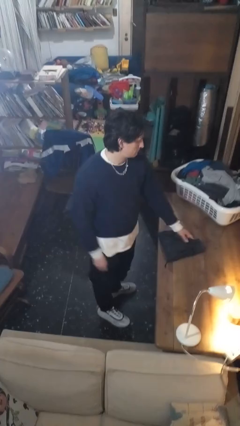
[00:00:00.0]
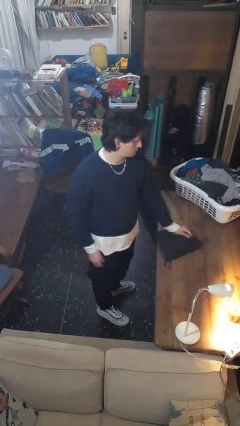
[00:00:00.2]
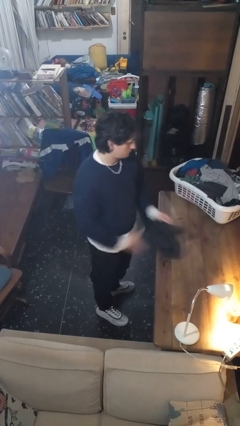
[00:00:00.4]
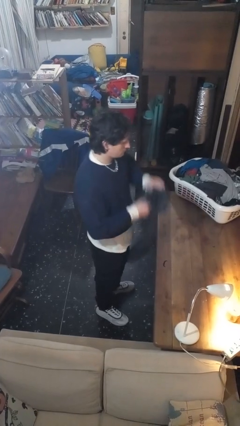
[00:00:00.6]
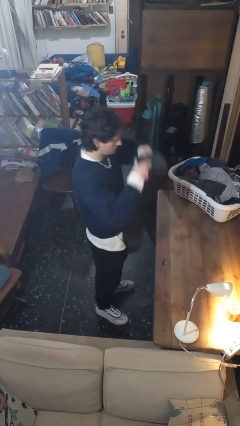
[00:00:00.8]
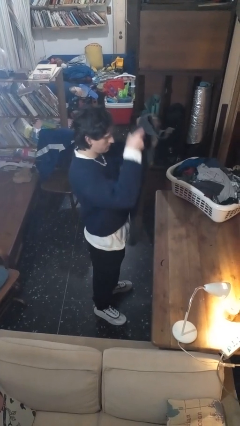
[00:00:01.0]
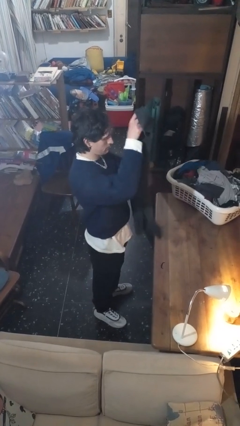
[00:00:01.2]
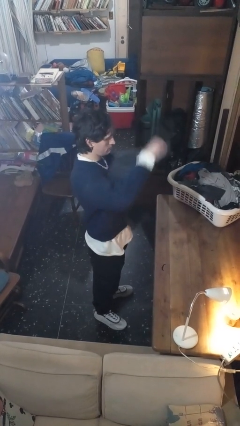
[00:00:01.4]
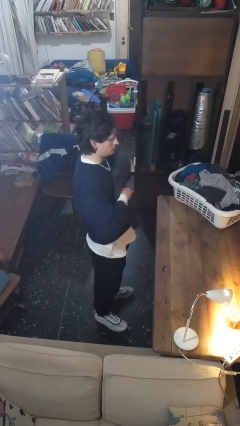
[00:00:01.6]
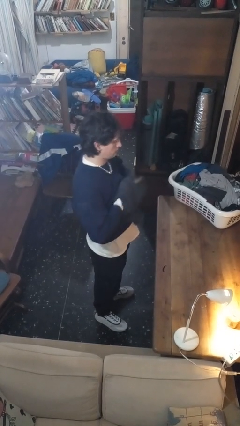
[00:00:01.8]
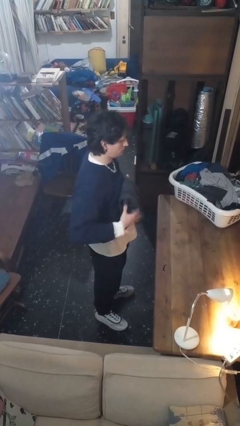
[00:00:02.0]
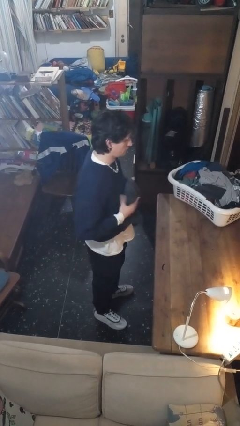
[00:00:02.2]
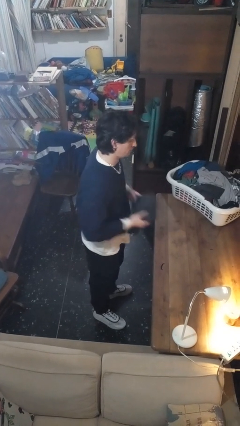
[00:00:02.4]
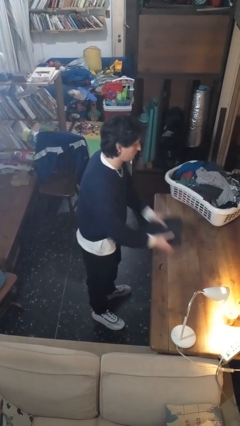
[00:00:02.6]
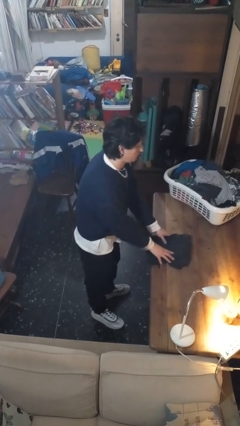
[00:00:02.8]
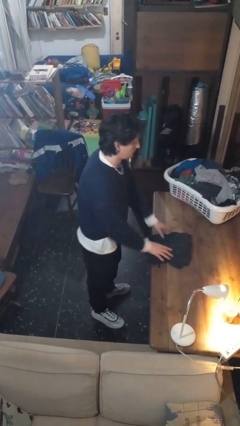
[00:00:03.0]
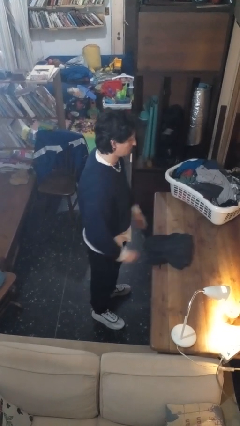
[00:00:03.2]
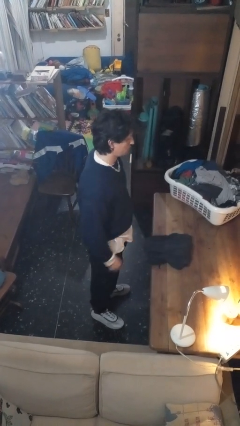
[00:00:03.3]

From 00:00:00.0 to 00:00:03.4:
person folds pants

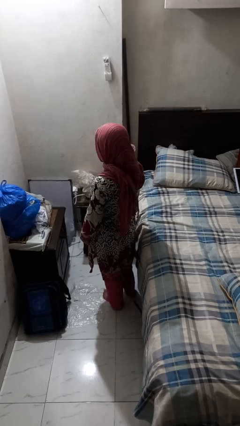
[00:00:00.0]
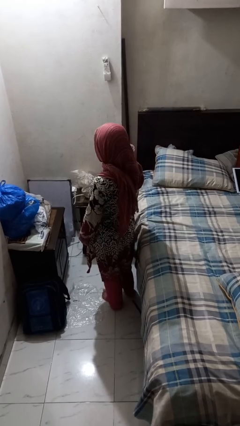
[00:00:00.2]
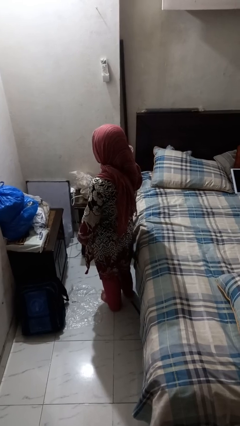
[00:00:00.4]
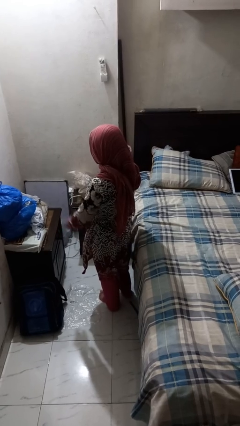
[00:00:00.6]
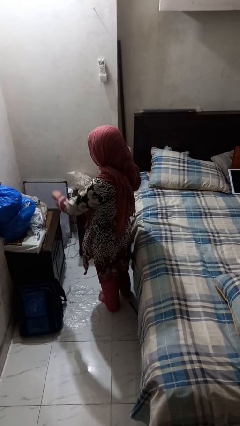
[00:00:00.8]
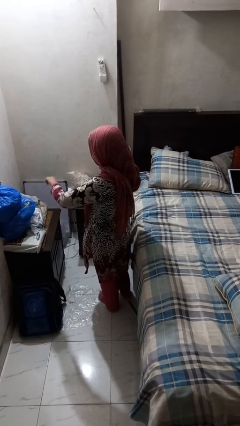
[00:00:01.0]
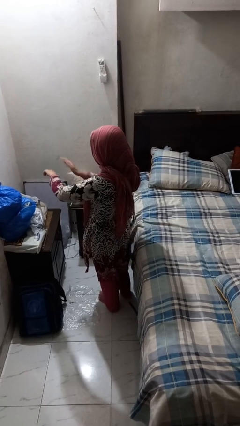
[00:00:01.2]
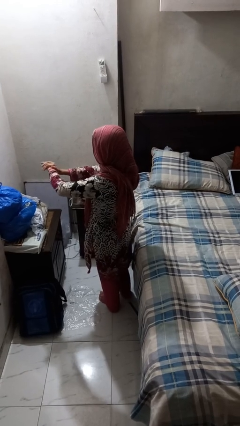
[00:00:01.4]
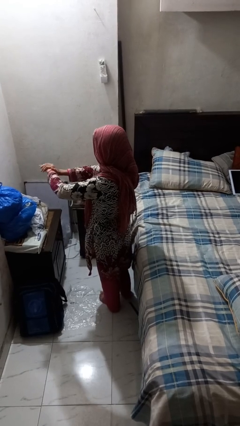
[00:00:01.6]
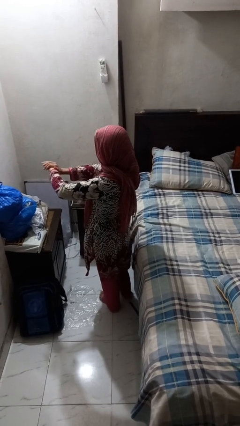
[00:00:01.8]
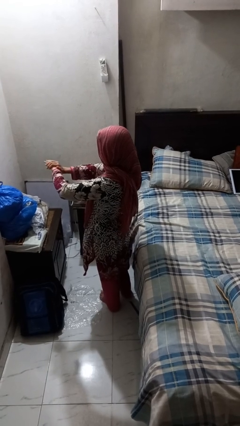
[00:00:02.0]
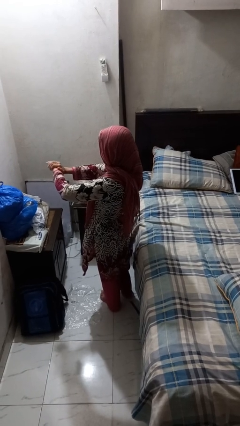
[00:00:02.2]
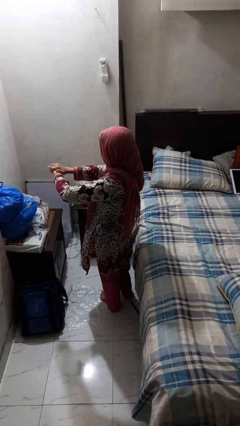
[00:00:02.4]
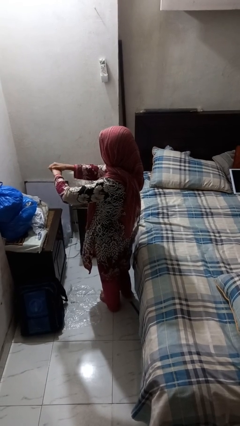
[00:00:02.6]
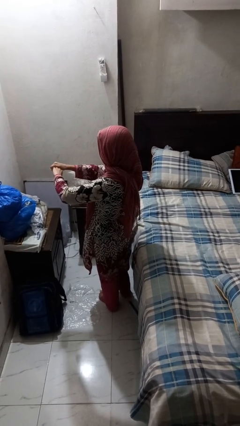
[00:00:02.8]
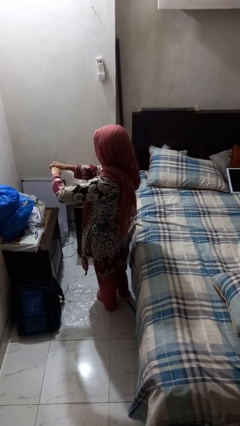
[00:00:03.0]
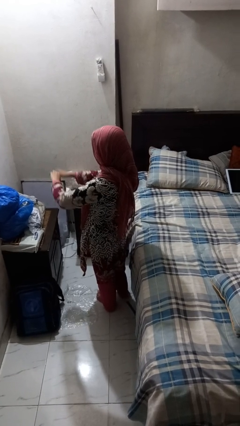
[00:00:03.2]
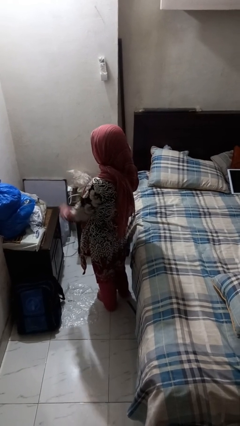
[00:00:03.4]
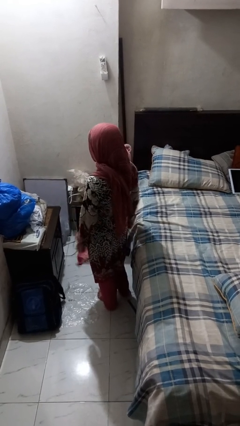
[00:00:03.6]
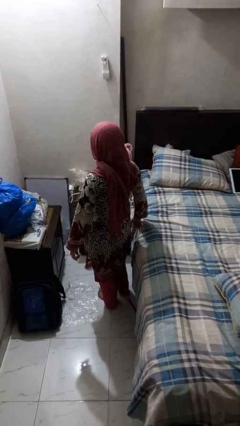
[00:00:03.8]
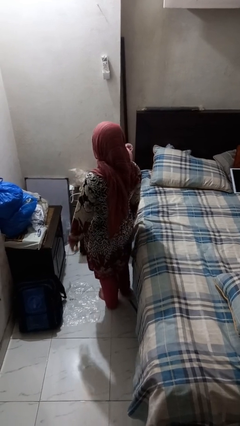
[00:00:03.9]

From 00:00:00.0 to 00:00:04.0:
person swats bug

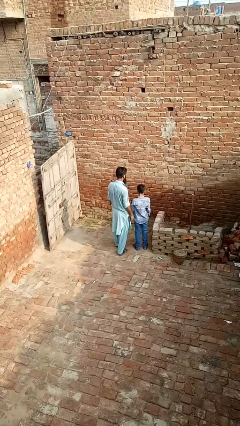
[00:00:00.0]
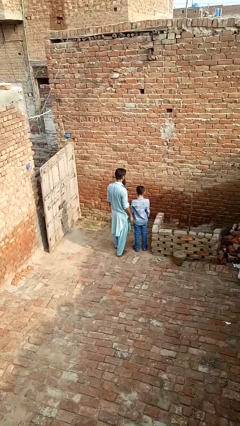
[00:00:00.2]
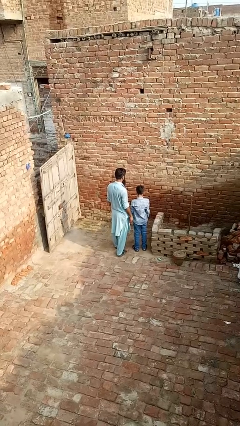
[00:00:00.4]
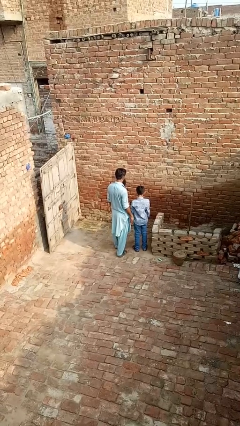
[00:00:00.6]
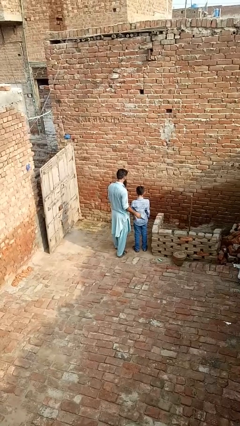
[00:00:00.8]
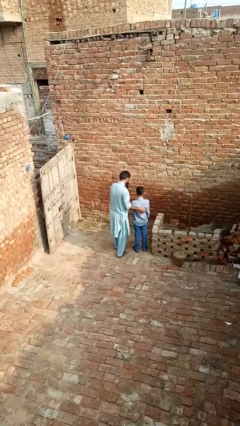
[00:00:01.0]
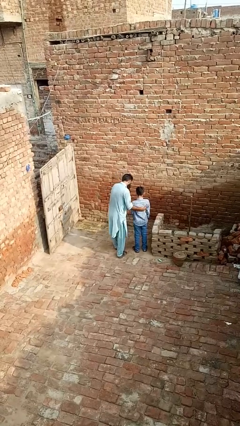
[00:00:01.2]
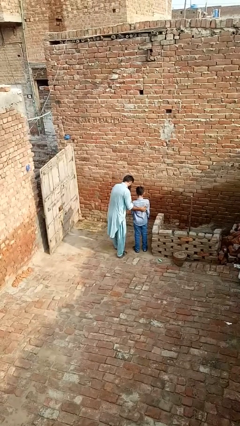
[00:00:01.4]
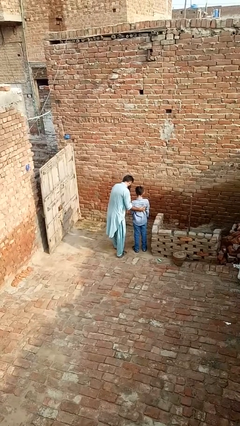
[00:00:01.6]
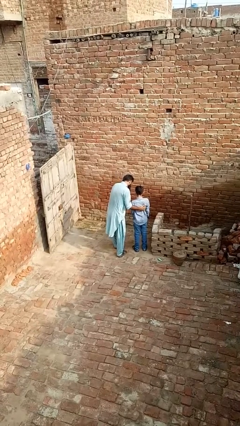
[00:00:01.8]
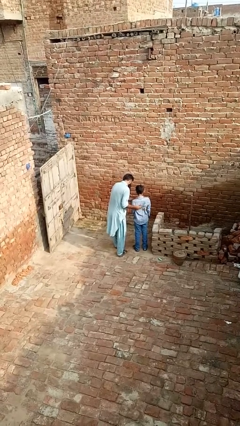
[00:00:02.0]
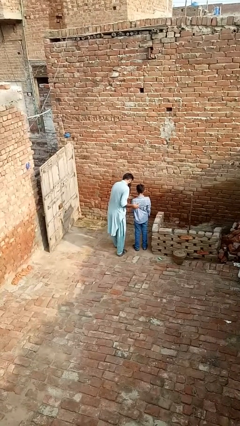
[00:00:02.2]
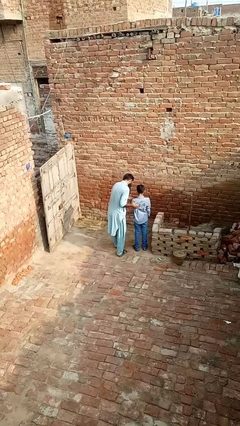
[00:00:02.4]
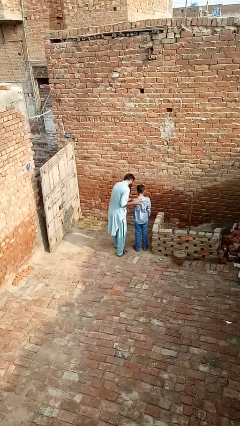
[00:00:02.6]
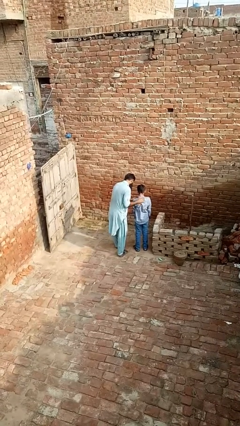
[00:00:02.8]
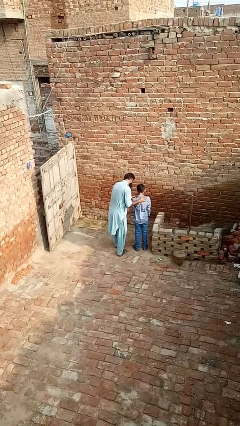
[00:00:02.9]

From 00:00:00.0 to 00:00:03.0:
person tickles person

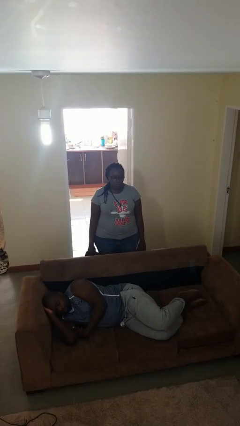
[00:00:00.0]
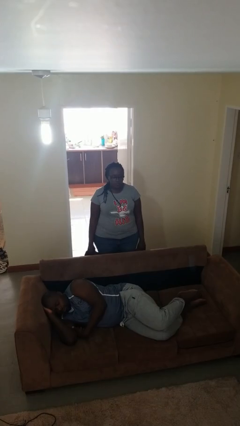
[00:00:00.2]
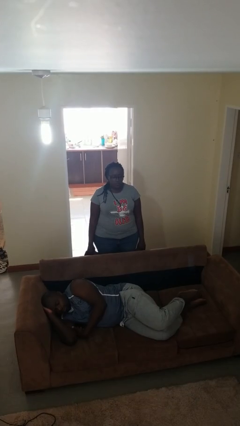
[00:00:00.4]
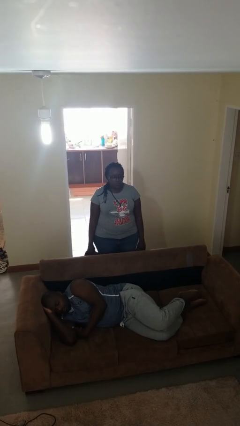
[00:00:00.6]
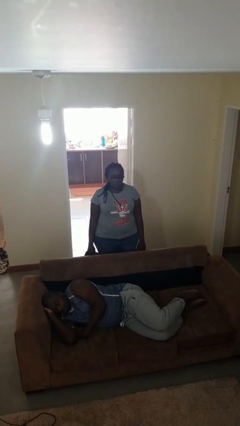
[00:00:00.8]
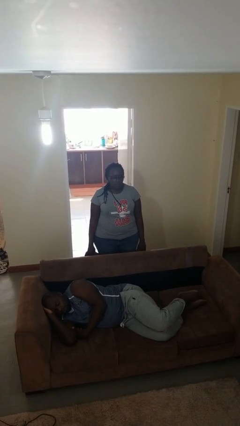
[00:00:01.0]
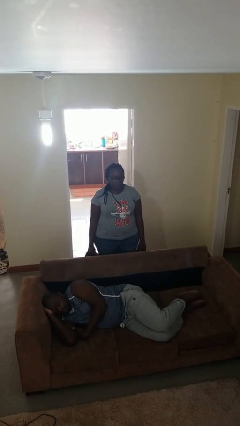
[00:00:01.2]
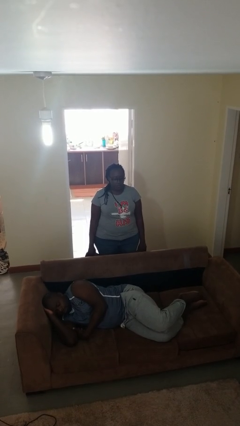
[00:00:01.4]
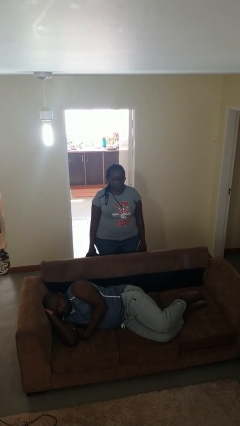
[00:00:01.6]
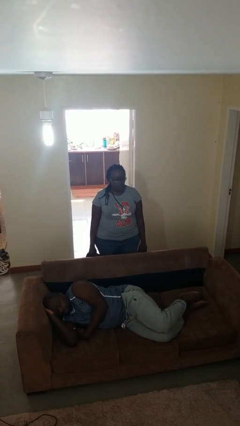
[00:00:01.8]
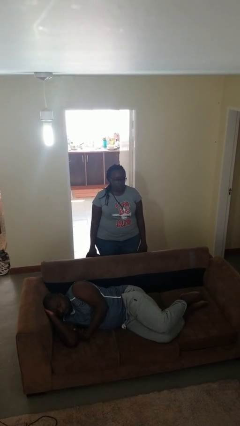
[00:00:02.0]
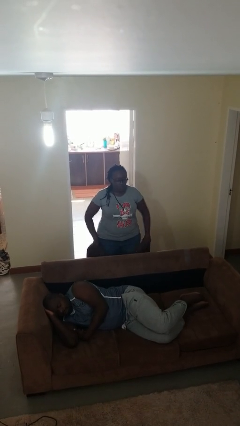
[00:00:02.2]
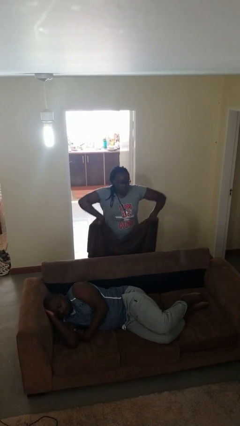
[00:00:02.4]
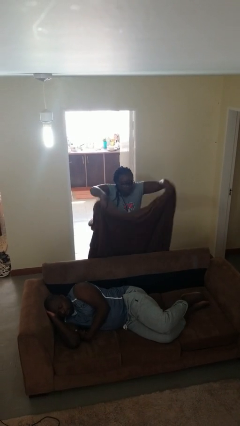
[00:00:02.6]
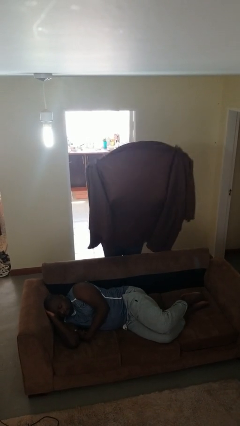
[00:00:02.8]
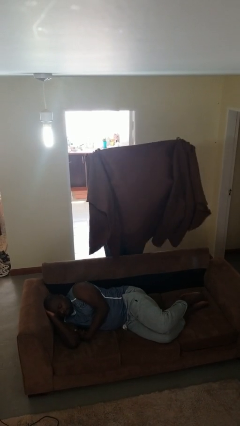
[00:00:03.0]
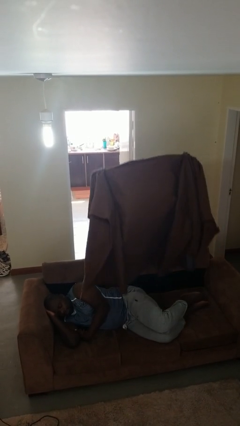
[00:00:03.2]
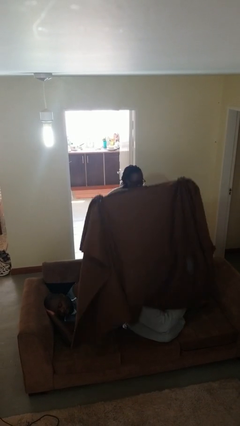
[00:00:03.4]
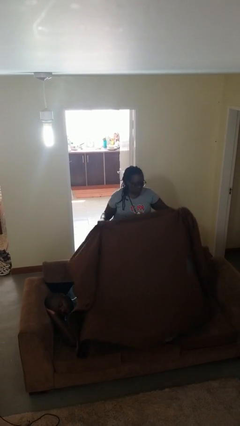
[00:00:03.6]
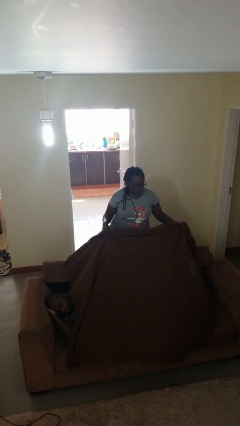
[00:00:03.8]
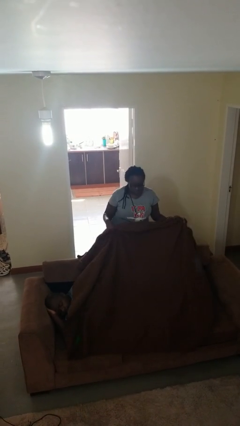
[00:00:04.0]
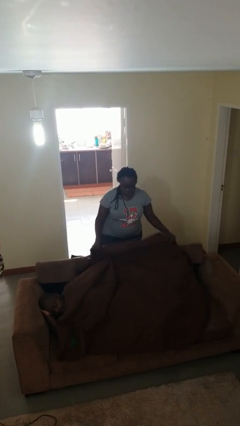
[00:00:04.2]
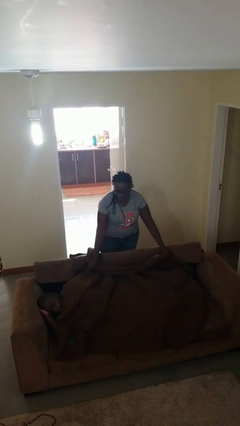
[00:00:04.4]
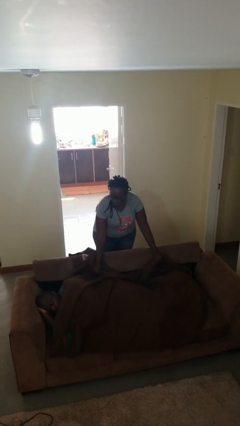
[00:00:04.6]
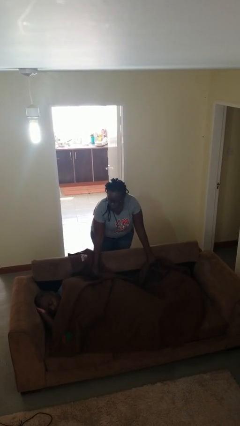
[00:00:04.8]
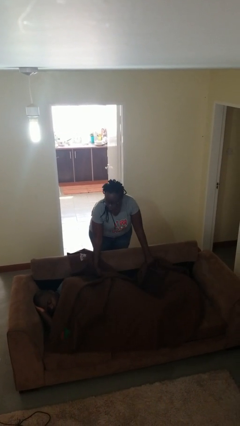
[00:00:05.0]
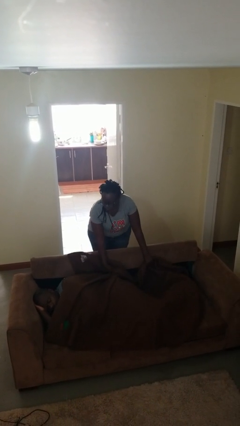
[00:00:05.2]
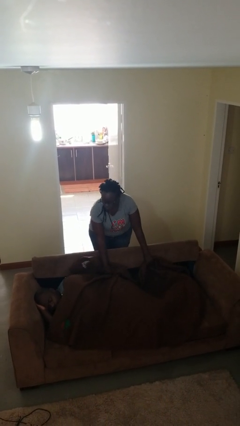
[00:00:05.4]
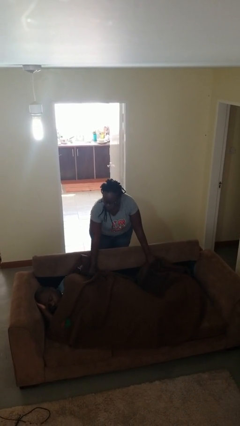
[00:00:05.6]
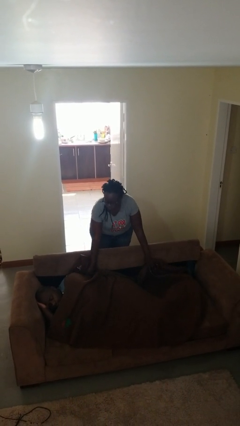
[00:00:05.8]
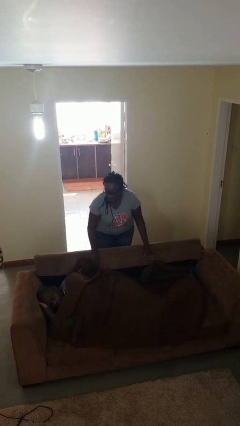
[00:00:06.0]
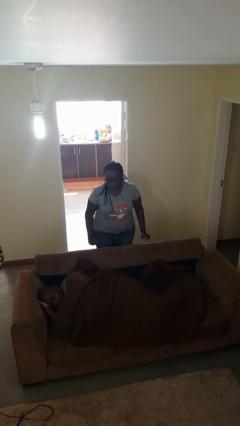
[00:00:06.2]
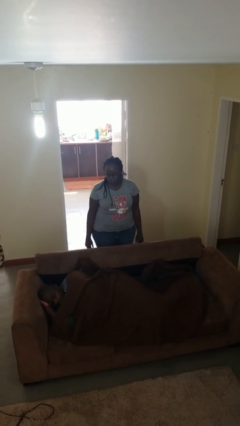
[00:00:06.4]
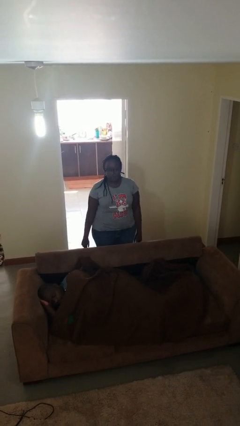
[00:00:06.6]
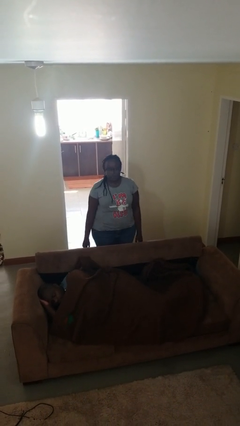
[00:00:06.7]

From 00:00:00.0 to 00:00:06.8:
person covers friend with blanket

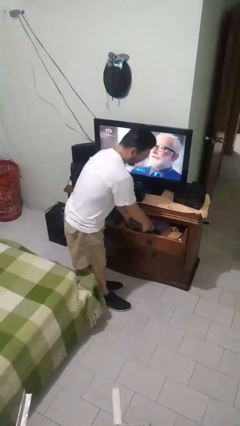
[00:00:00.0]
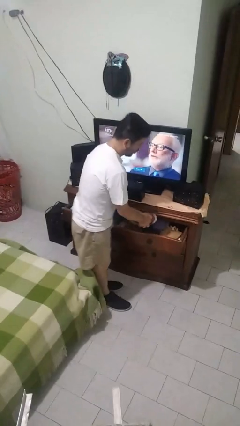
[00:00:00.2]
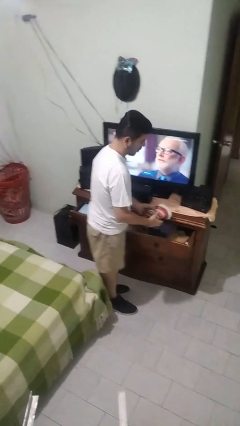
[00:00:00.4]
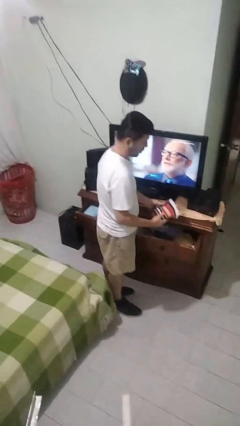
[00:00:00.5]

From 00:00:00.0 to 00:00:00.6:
person takes clothes from dresser
